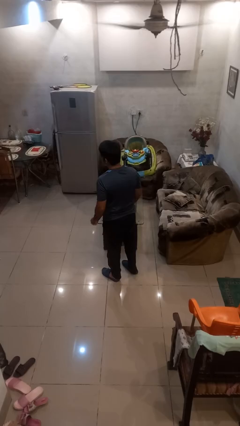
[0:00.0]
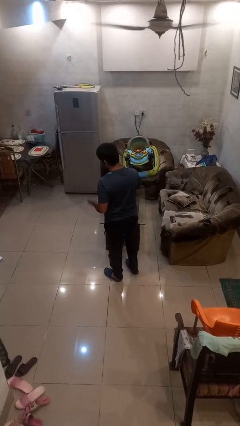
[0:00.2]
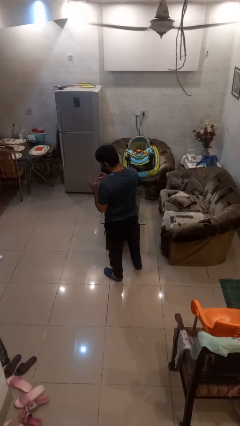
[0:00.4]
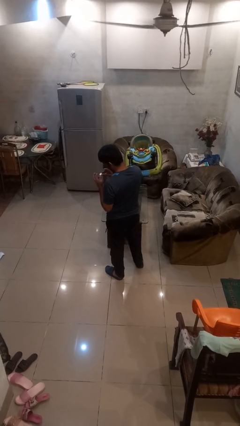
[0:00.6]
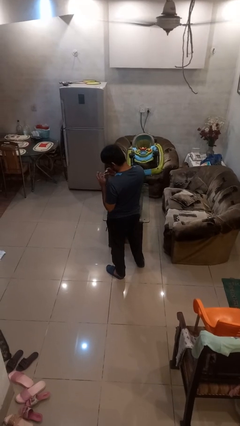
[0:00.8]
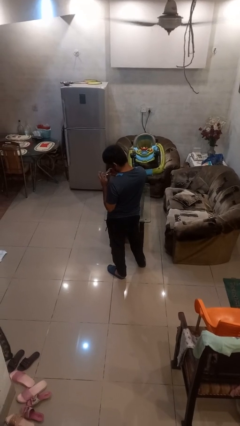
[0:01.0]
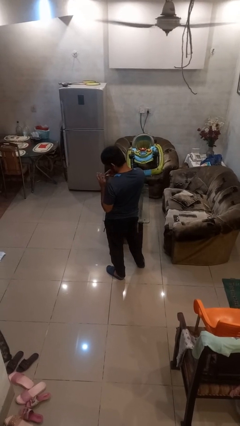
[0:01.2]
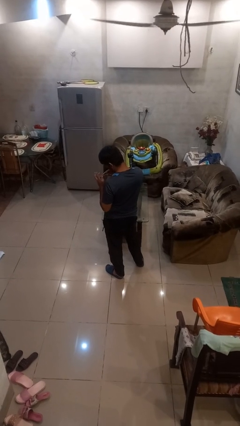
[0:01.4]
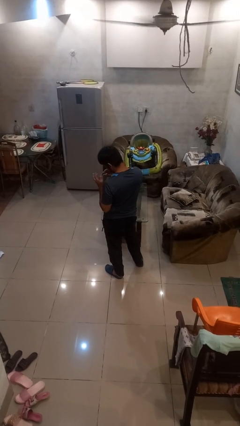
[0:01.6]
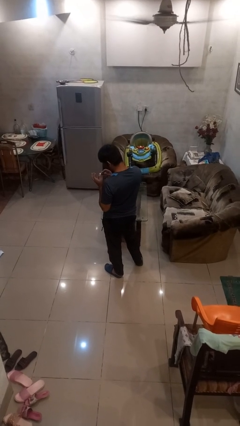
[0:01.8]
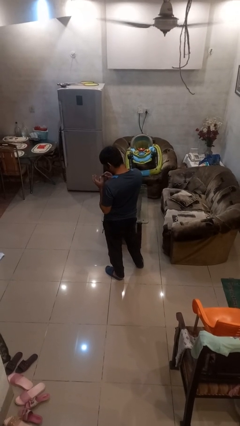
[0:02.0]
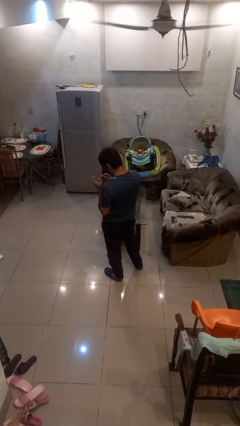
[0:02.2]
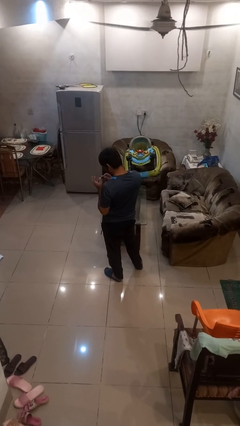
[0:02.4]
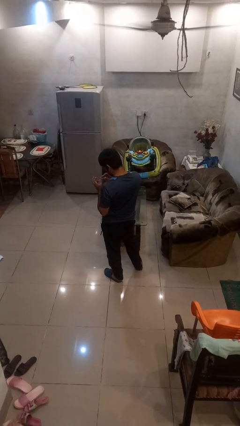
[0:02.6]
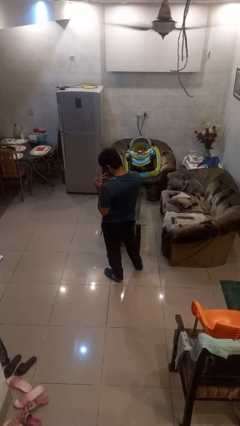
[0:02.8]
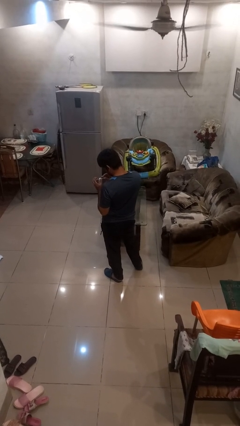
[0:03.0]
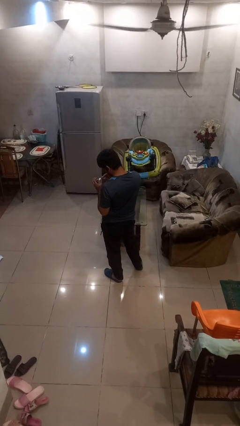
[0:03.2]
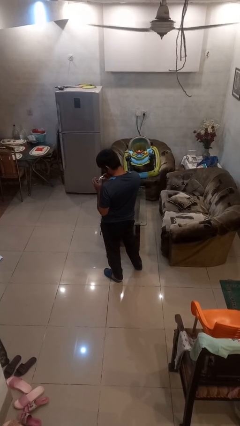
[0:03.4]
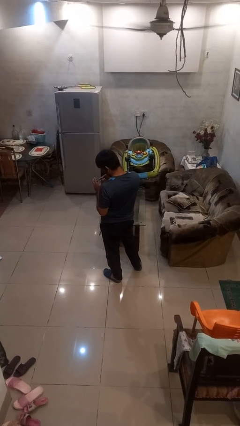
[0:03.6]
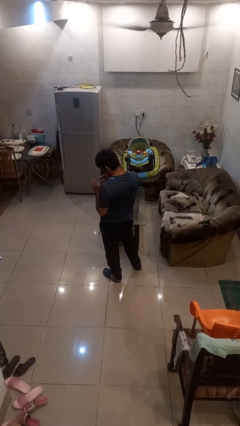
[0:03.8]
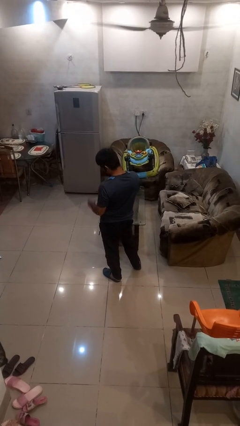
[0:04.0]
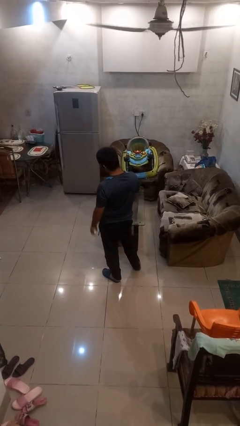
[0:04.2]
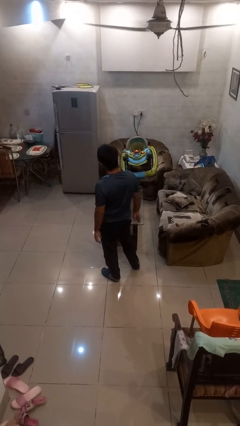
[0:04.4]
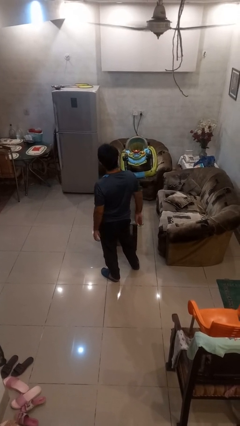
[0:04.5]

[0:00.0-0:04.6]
person clips fingernails

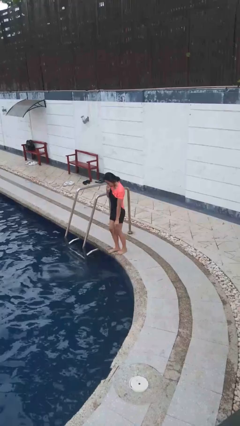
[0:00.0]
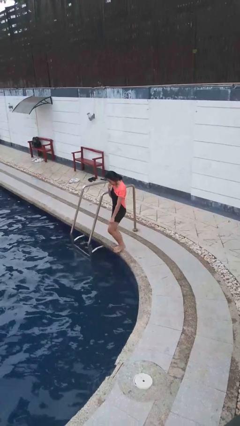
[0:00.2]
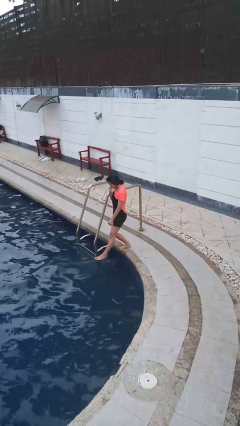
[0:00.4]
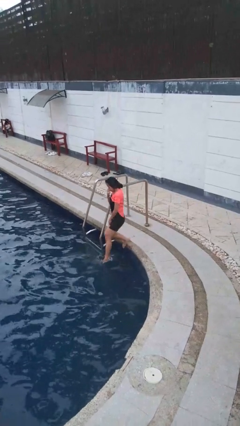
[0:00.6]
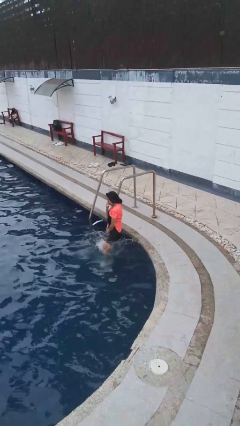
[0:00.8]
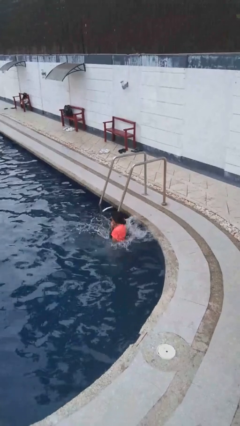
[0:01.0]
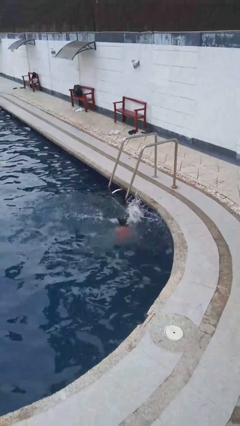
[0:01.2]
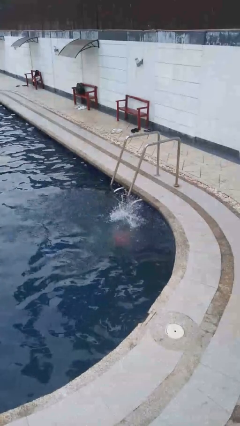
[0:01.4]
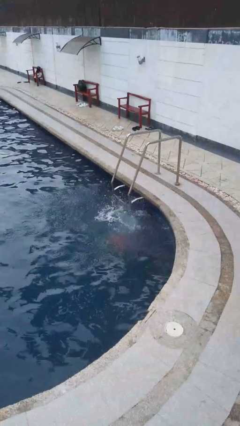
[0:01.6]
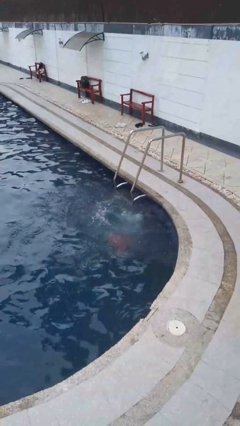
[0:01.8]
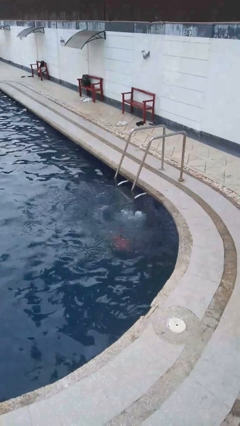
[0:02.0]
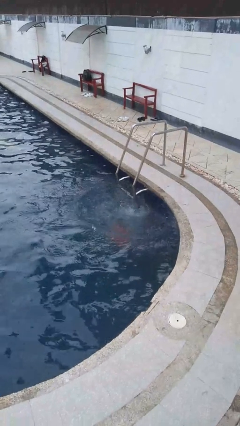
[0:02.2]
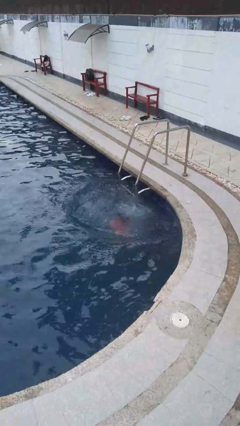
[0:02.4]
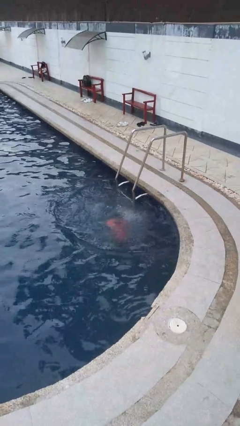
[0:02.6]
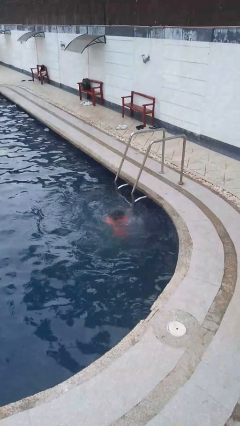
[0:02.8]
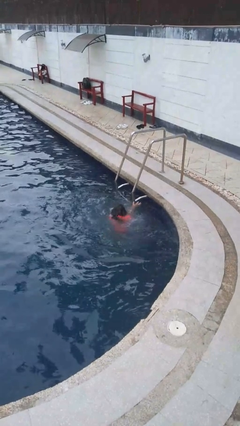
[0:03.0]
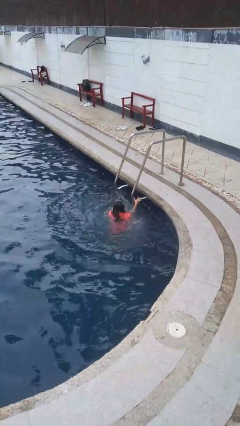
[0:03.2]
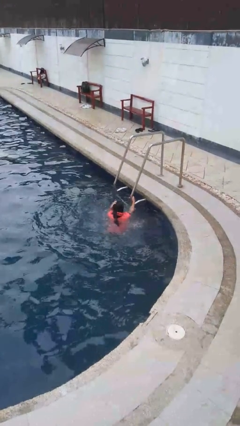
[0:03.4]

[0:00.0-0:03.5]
person jumps into pool

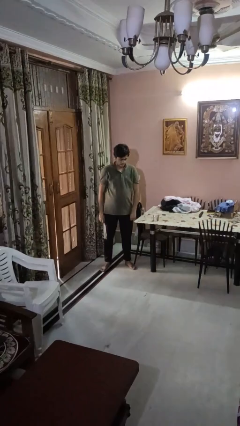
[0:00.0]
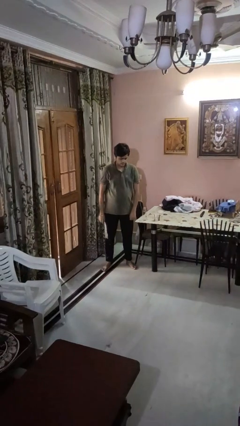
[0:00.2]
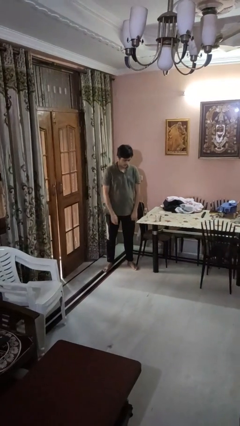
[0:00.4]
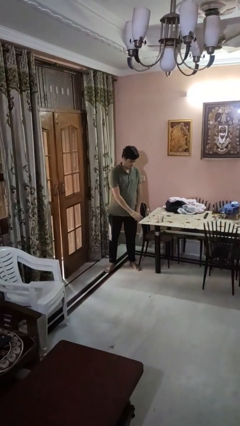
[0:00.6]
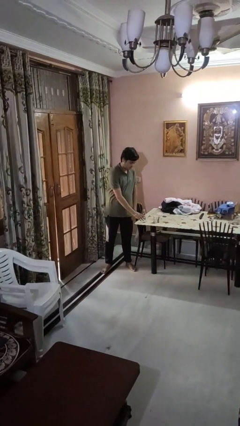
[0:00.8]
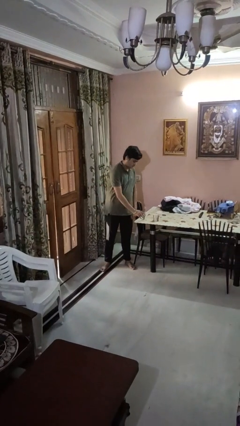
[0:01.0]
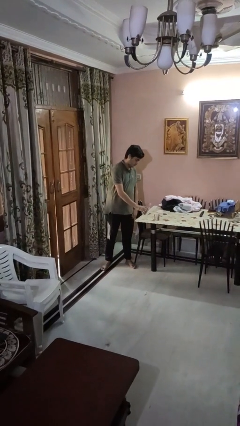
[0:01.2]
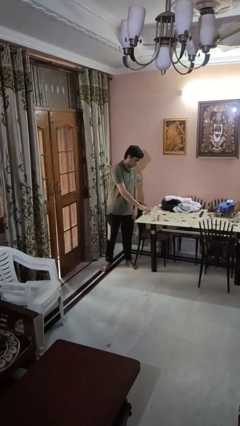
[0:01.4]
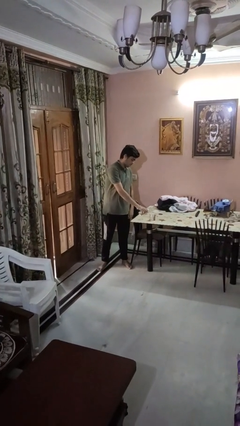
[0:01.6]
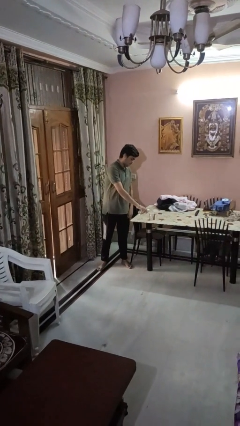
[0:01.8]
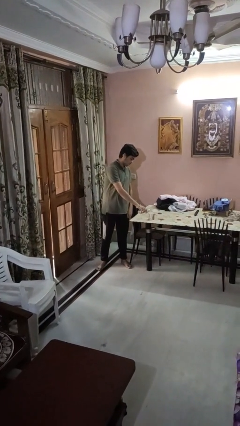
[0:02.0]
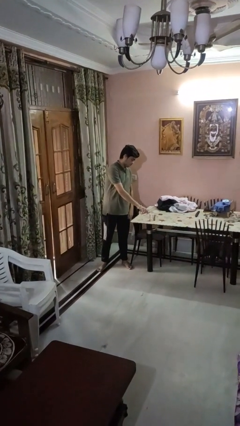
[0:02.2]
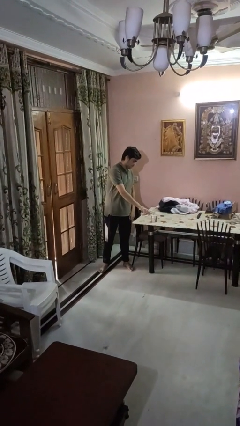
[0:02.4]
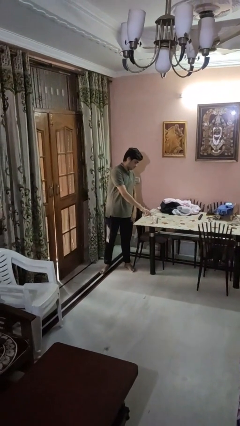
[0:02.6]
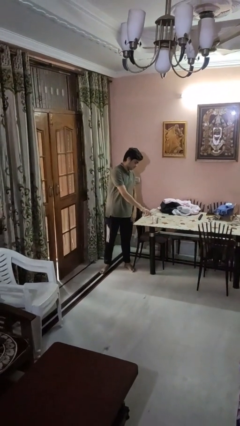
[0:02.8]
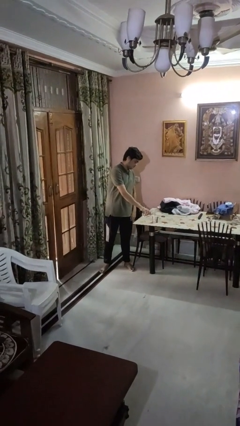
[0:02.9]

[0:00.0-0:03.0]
person pours liquid into cup

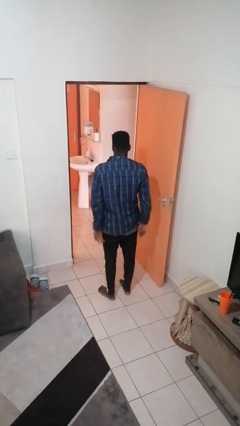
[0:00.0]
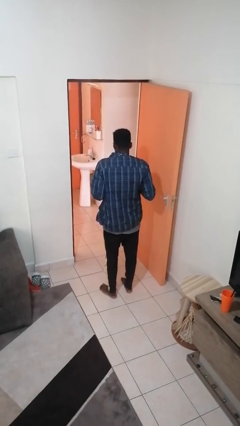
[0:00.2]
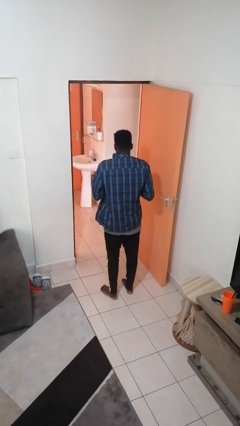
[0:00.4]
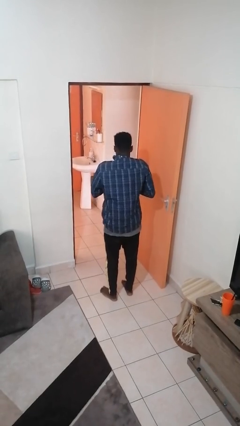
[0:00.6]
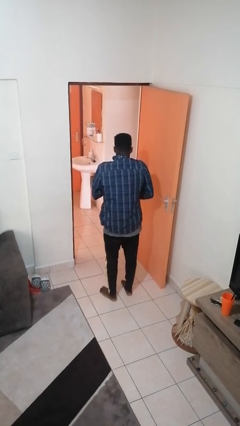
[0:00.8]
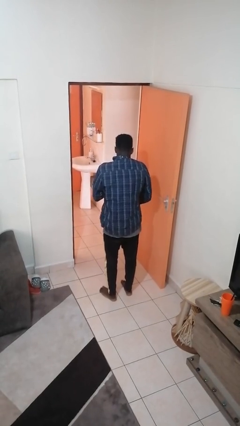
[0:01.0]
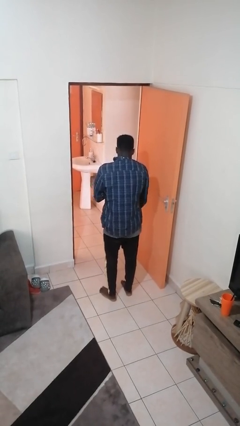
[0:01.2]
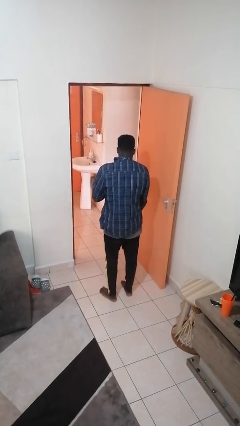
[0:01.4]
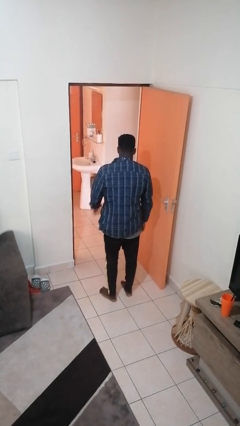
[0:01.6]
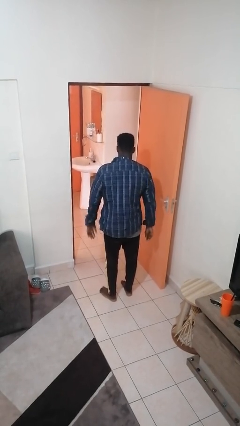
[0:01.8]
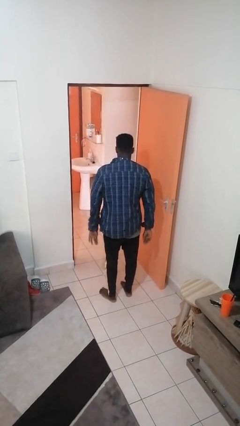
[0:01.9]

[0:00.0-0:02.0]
person unzips jacket

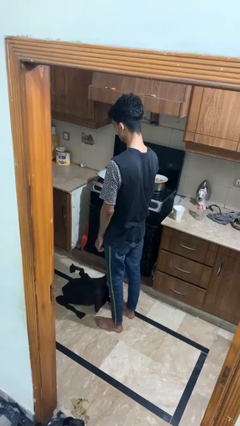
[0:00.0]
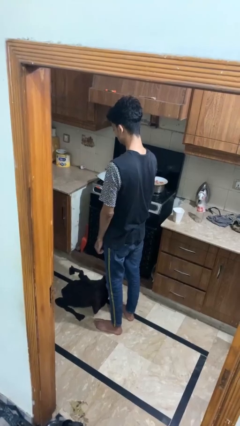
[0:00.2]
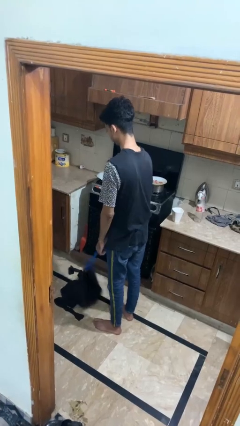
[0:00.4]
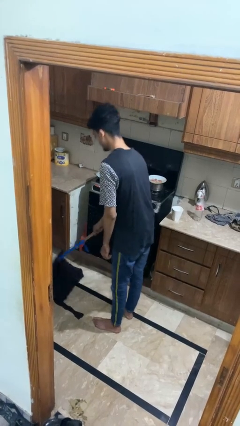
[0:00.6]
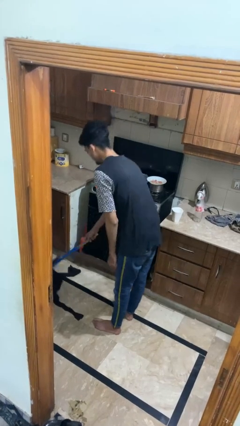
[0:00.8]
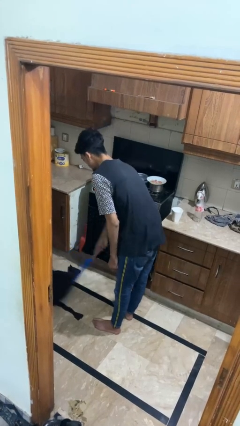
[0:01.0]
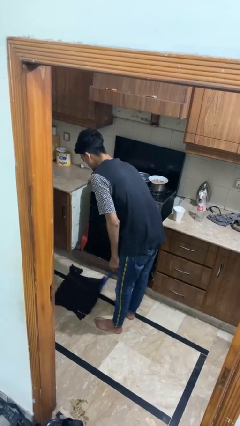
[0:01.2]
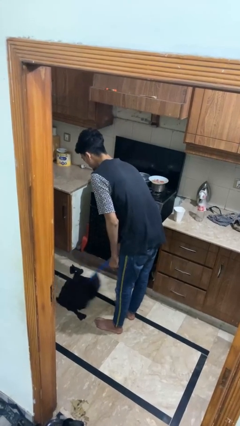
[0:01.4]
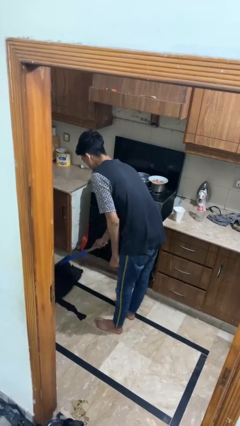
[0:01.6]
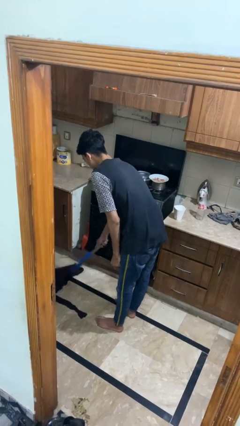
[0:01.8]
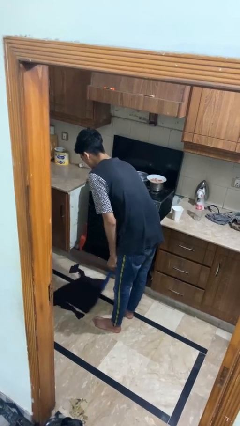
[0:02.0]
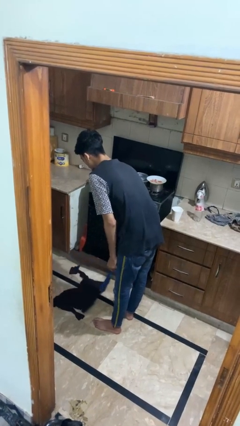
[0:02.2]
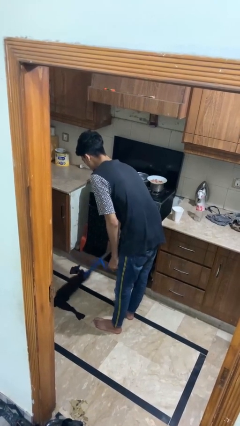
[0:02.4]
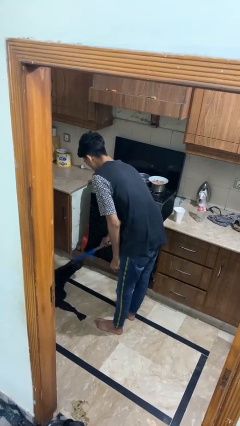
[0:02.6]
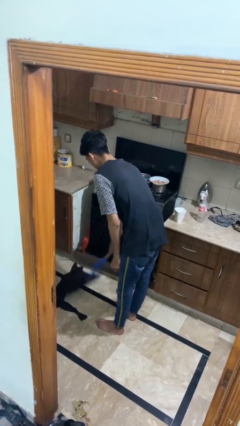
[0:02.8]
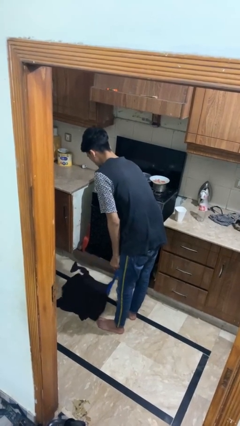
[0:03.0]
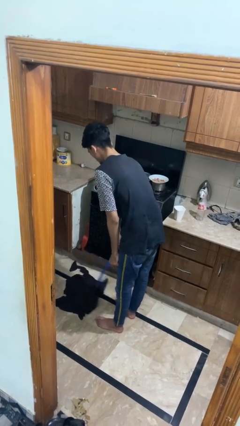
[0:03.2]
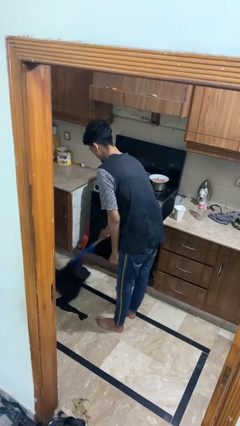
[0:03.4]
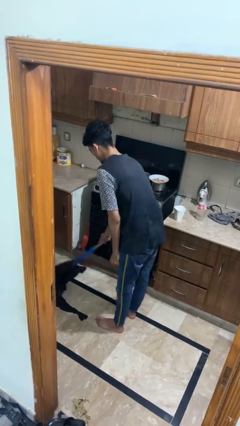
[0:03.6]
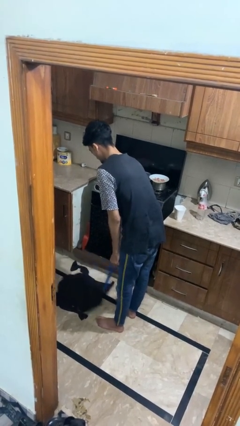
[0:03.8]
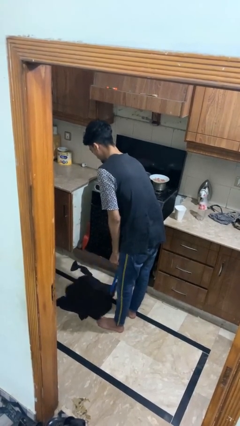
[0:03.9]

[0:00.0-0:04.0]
person mops

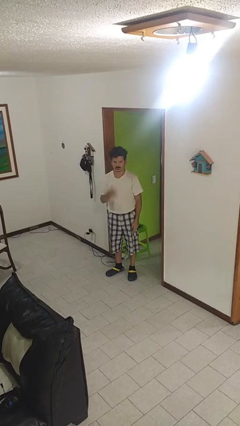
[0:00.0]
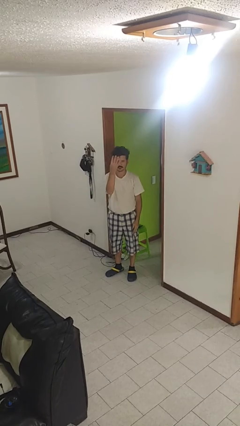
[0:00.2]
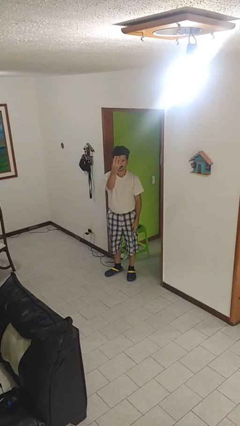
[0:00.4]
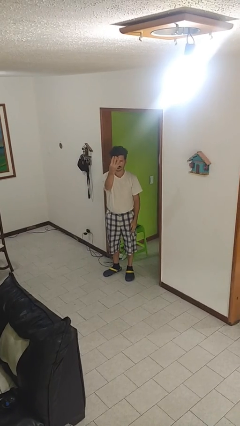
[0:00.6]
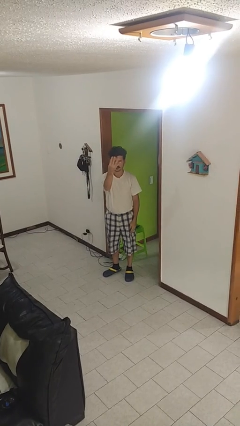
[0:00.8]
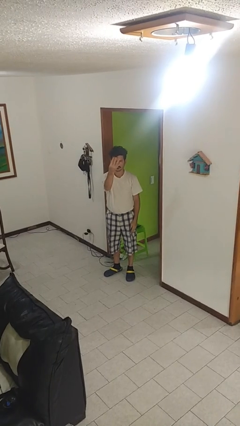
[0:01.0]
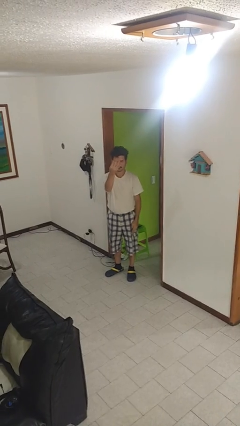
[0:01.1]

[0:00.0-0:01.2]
person gestures number four
